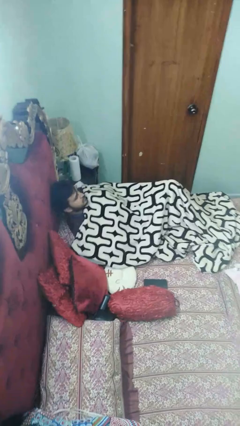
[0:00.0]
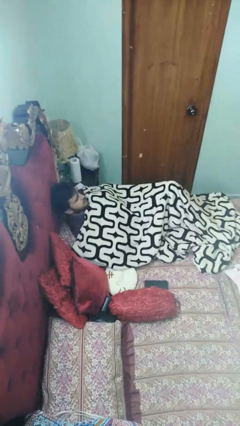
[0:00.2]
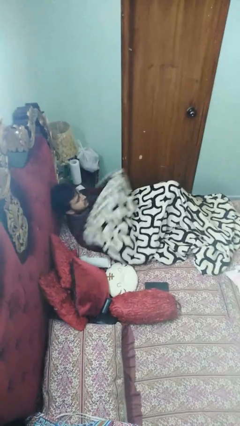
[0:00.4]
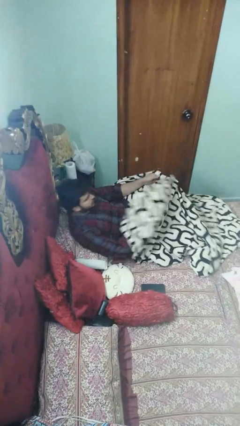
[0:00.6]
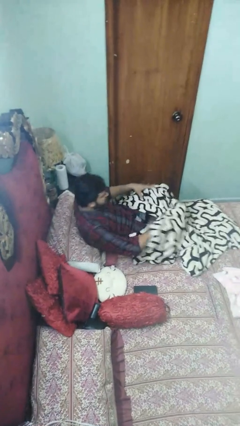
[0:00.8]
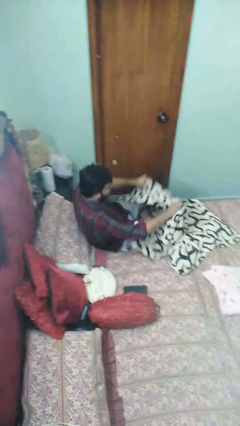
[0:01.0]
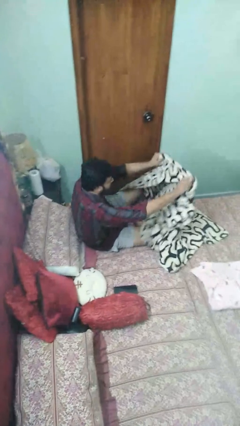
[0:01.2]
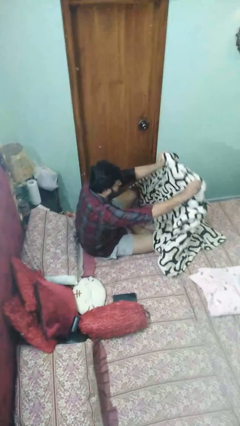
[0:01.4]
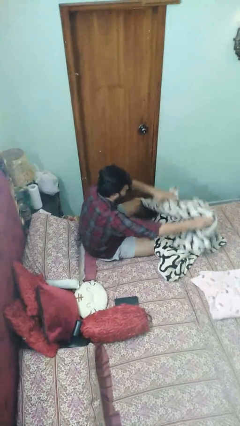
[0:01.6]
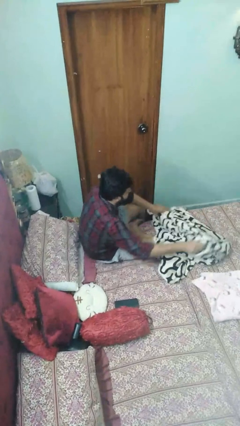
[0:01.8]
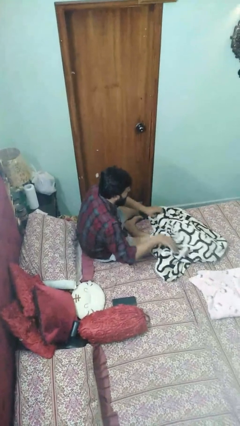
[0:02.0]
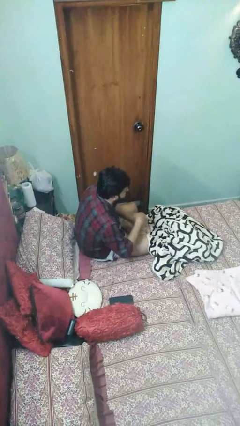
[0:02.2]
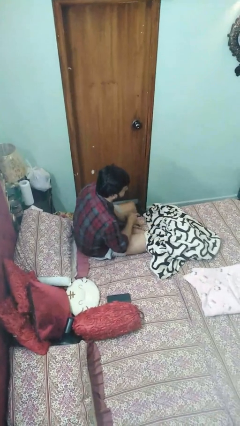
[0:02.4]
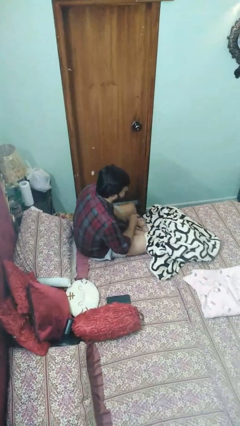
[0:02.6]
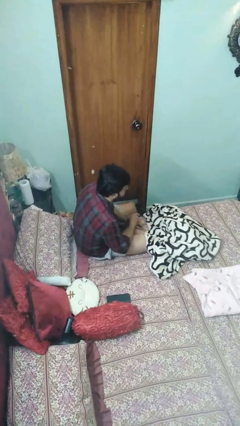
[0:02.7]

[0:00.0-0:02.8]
person uncovers with blanket

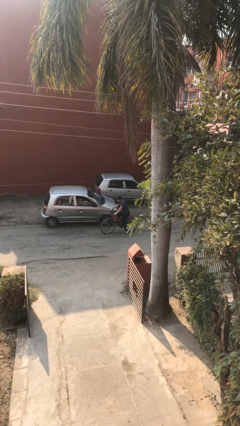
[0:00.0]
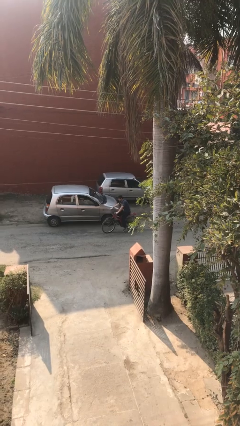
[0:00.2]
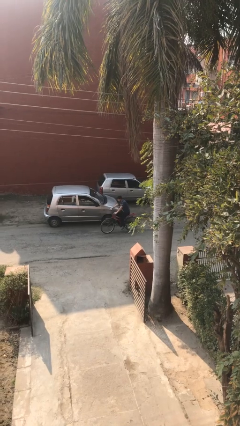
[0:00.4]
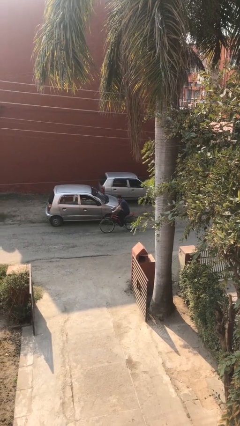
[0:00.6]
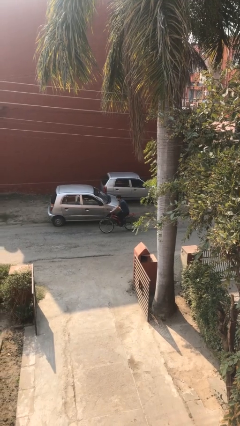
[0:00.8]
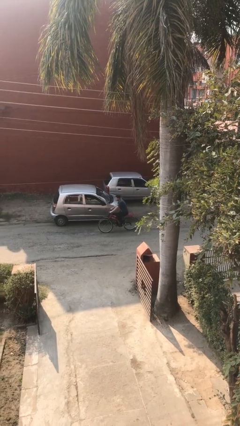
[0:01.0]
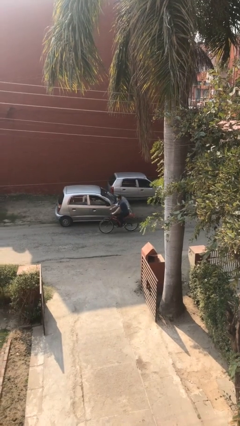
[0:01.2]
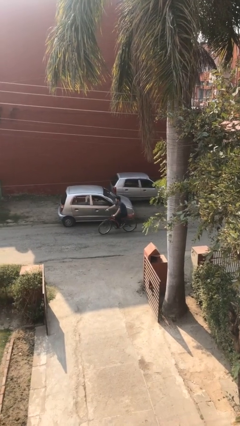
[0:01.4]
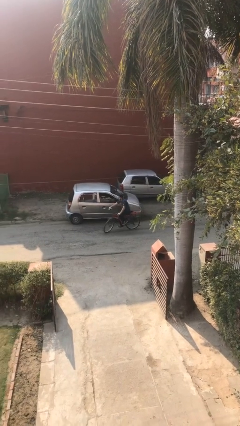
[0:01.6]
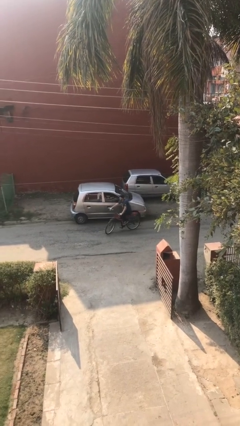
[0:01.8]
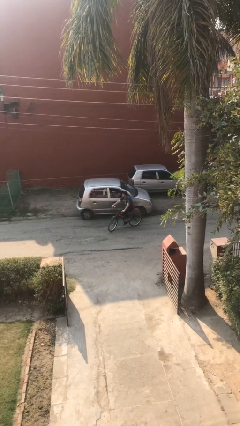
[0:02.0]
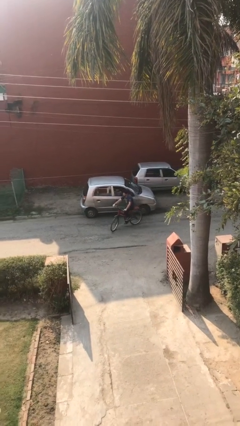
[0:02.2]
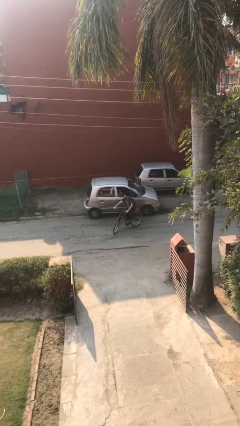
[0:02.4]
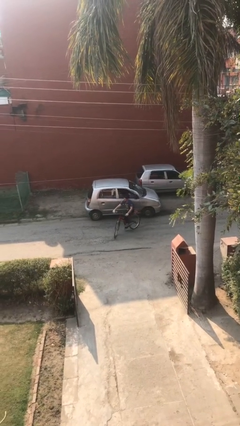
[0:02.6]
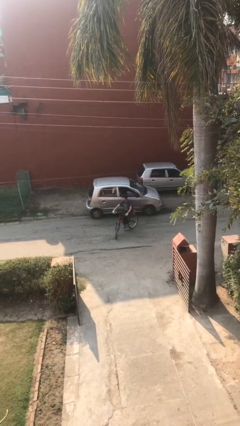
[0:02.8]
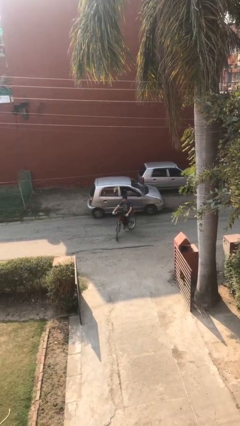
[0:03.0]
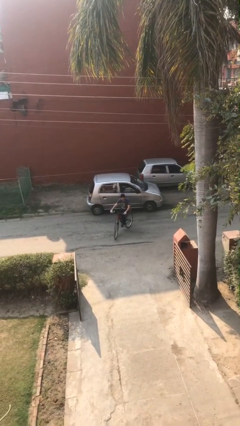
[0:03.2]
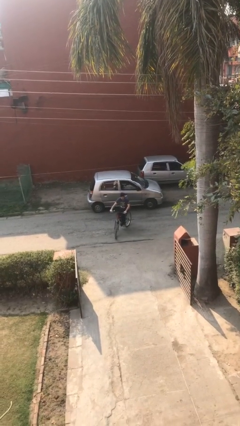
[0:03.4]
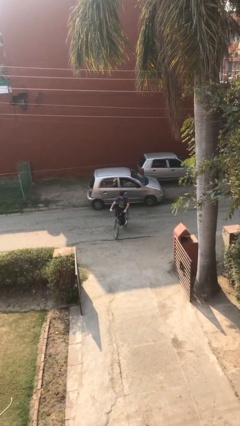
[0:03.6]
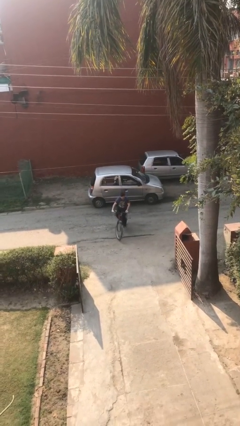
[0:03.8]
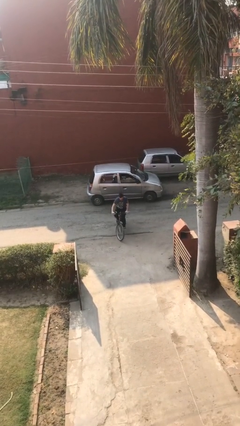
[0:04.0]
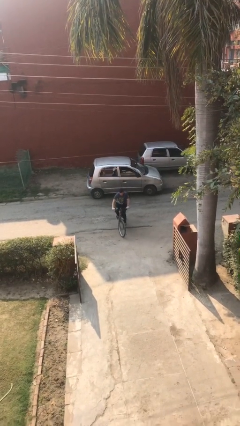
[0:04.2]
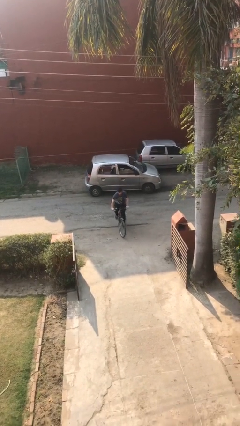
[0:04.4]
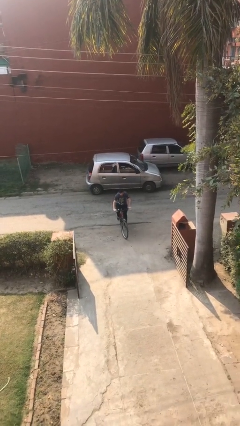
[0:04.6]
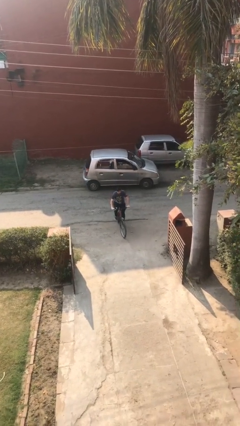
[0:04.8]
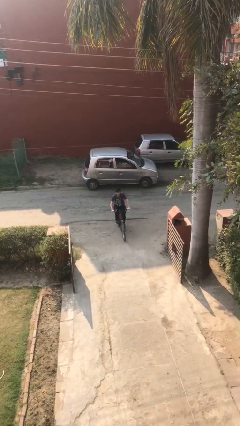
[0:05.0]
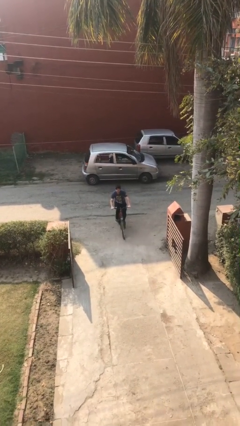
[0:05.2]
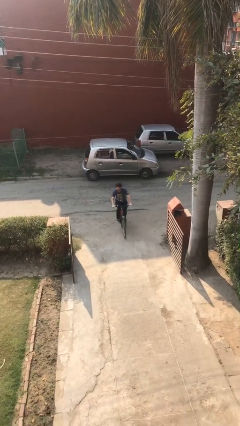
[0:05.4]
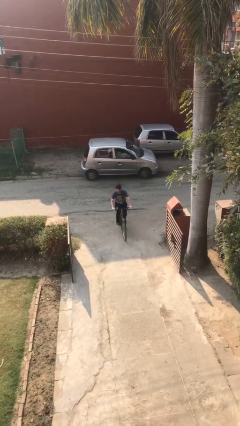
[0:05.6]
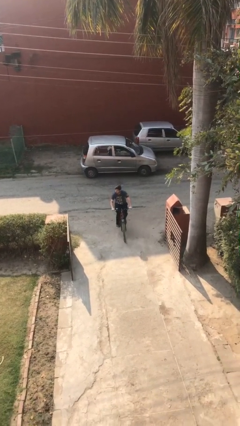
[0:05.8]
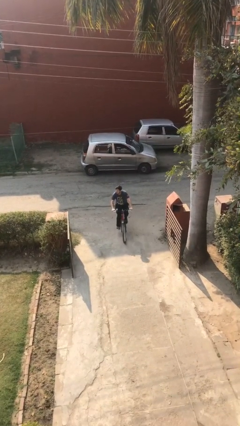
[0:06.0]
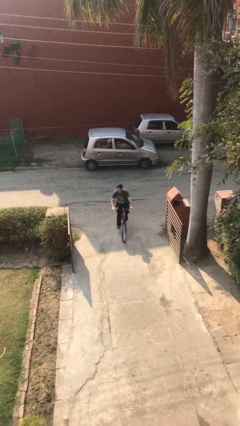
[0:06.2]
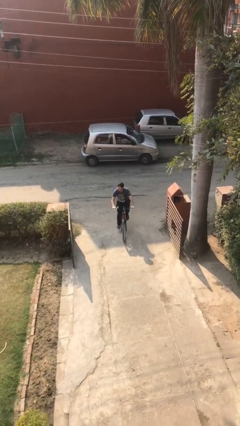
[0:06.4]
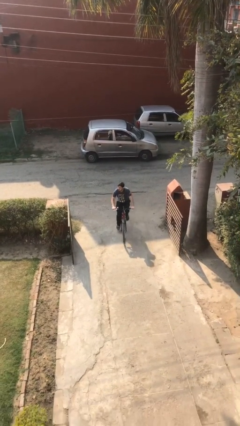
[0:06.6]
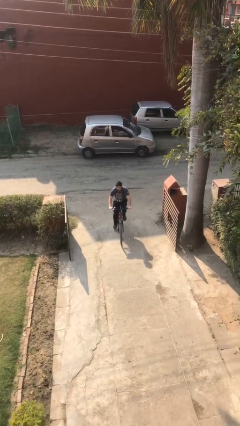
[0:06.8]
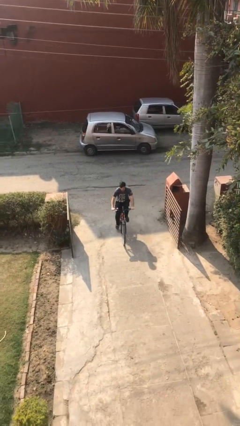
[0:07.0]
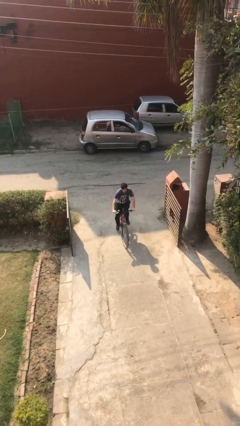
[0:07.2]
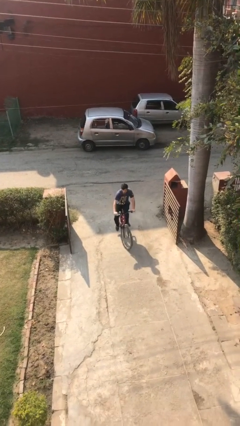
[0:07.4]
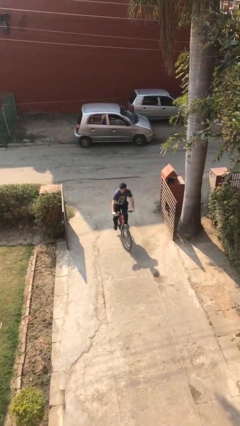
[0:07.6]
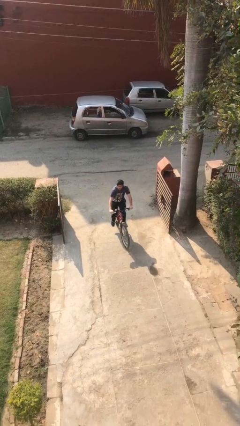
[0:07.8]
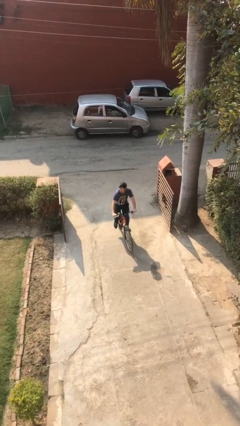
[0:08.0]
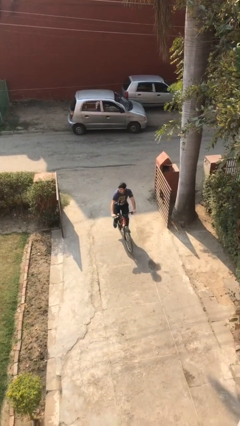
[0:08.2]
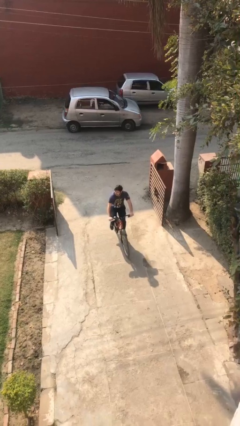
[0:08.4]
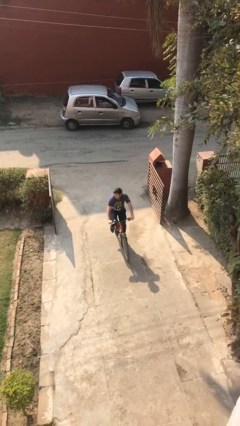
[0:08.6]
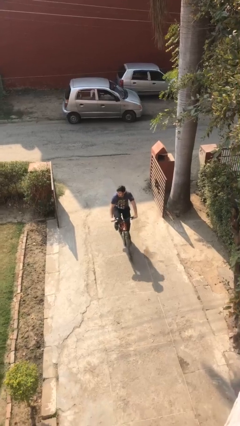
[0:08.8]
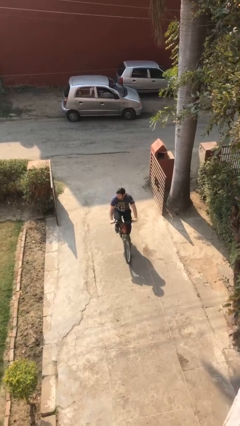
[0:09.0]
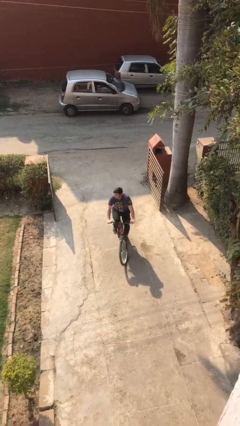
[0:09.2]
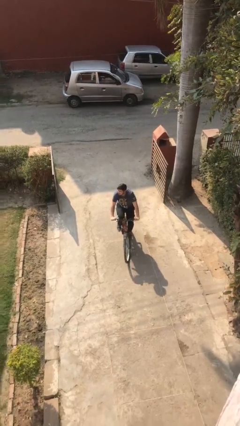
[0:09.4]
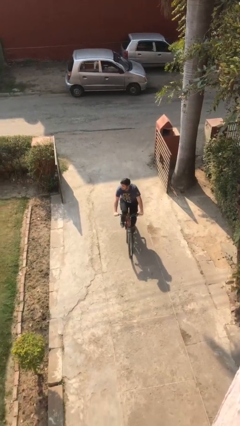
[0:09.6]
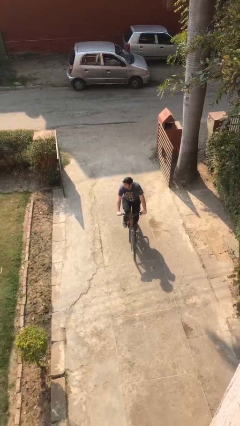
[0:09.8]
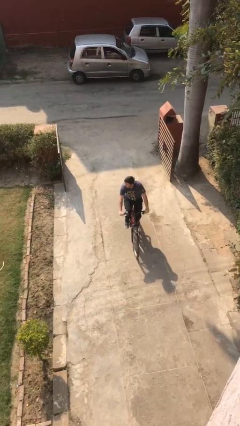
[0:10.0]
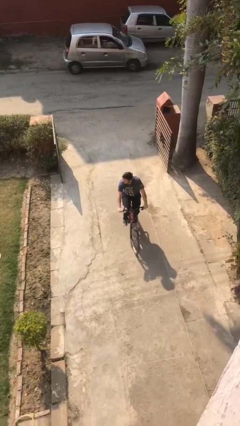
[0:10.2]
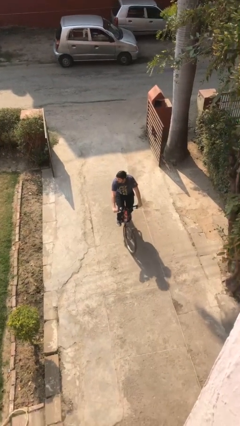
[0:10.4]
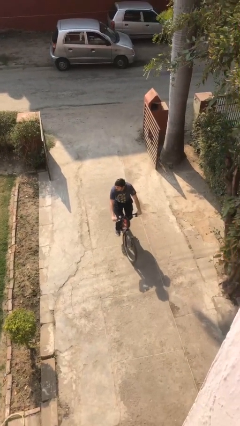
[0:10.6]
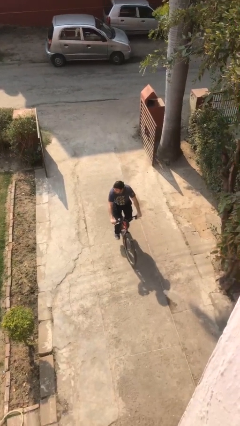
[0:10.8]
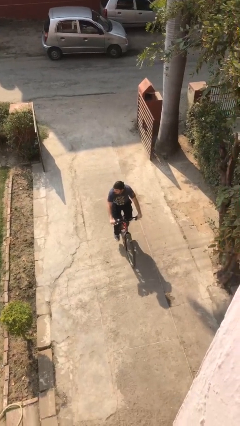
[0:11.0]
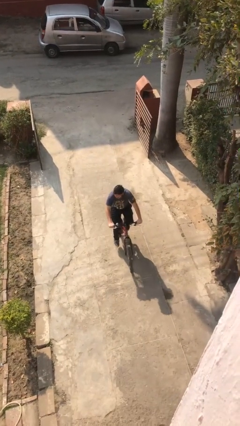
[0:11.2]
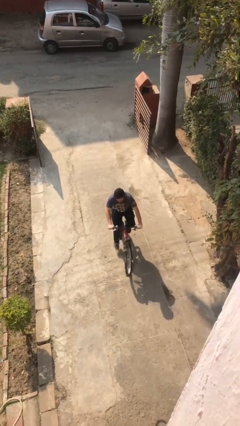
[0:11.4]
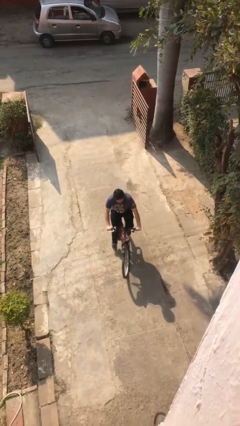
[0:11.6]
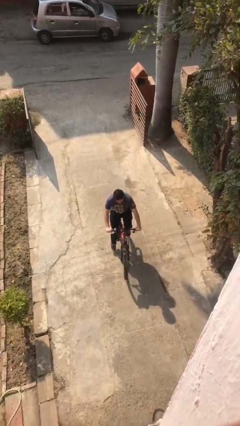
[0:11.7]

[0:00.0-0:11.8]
person rides bicycle

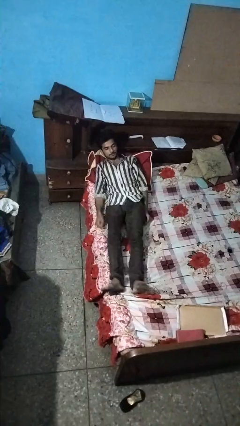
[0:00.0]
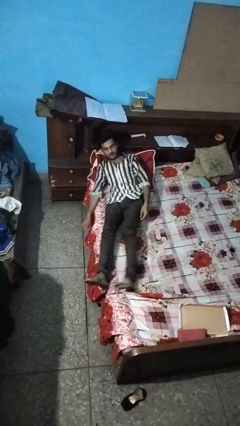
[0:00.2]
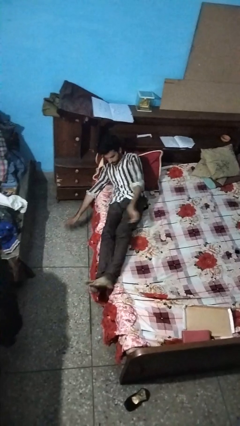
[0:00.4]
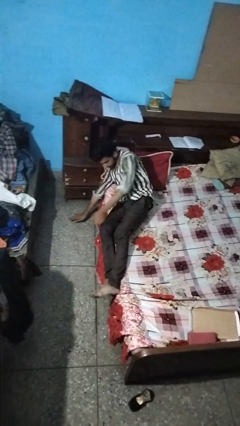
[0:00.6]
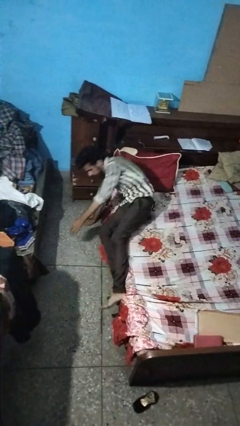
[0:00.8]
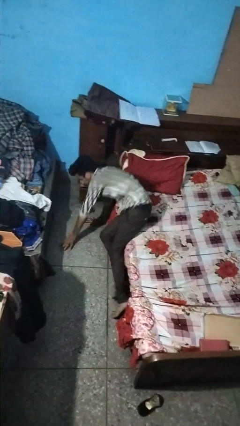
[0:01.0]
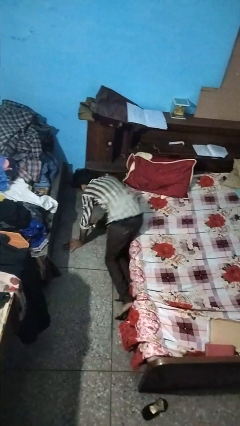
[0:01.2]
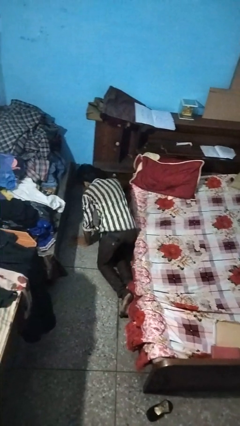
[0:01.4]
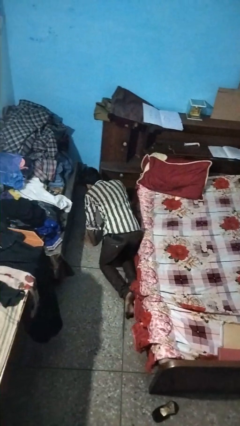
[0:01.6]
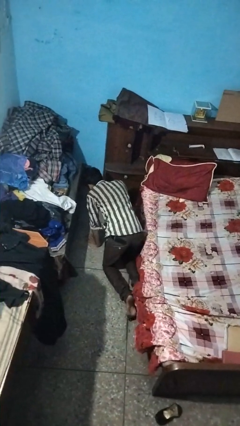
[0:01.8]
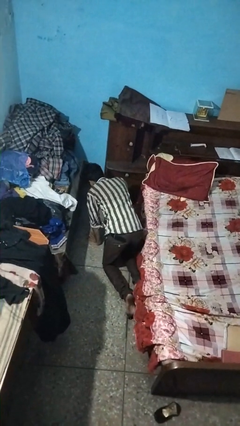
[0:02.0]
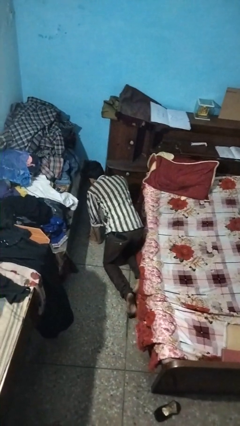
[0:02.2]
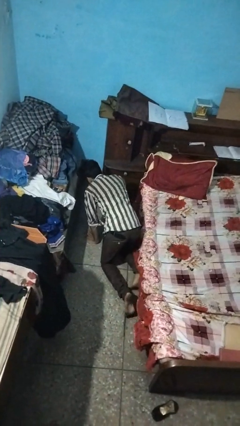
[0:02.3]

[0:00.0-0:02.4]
person falls from bed

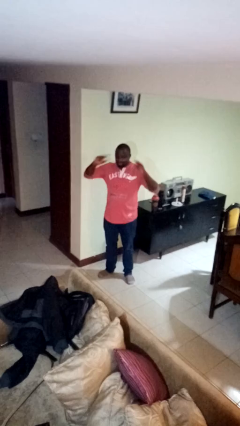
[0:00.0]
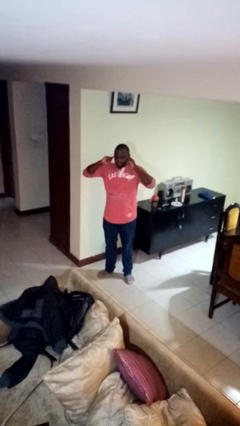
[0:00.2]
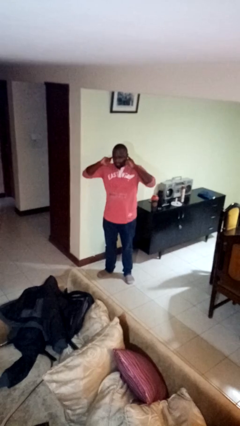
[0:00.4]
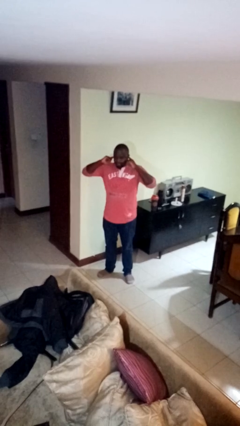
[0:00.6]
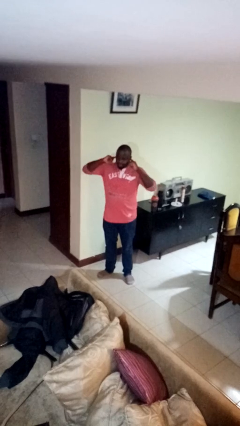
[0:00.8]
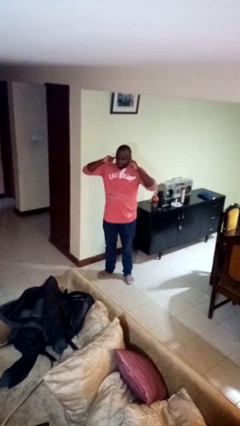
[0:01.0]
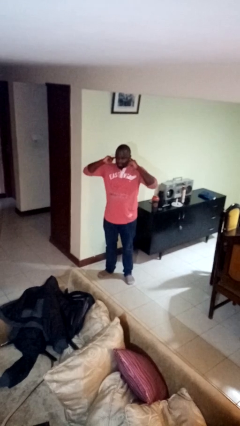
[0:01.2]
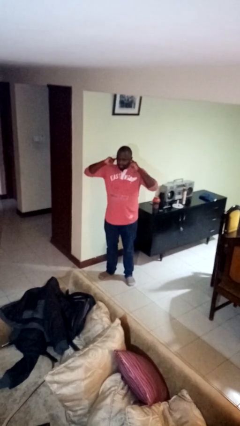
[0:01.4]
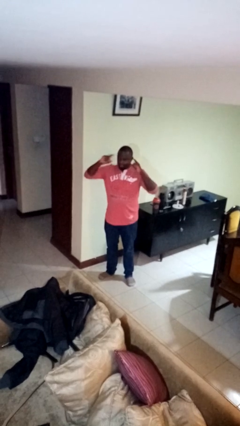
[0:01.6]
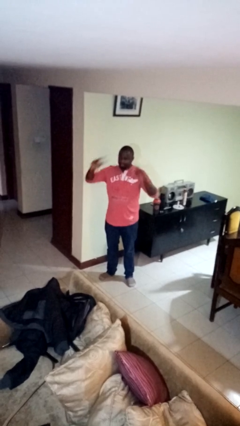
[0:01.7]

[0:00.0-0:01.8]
person puts fingers in ear
